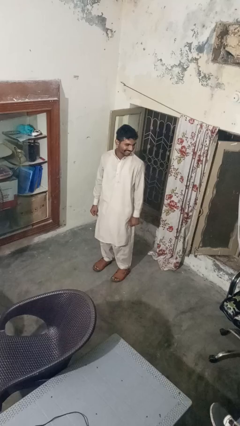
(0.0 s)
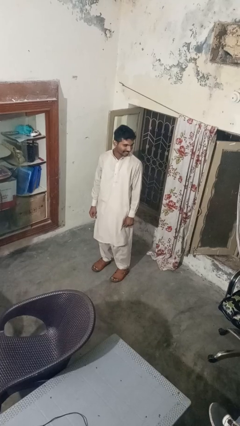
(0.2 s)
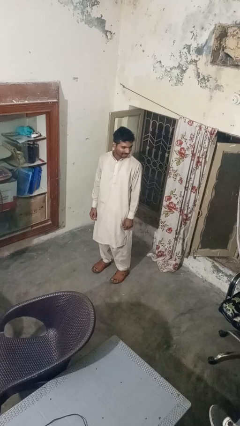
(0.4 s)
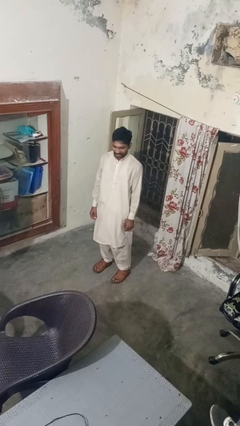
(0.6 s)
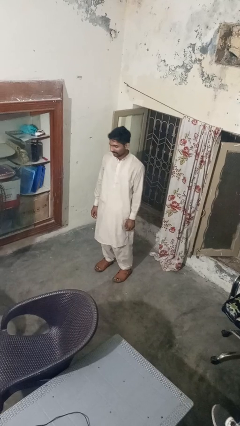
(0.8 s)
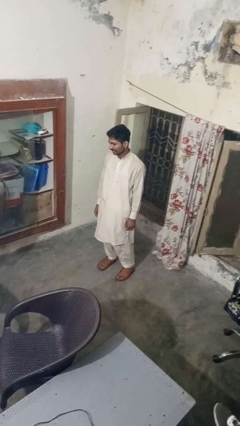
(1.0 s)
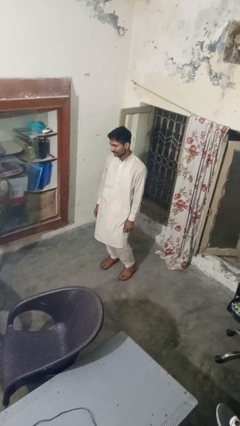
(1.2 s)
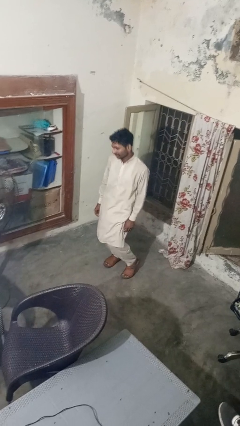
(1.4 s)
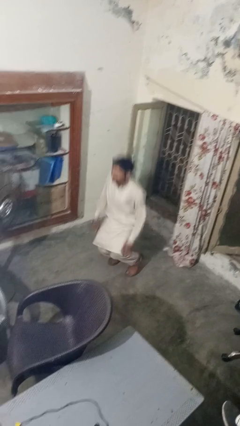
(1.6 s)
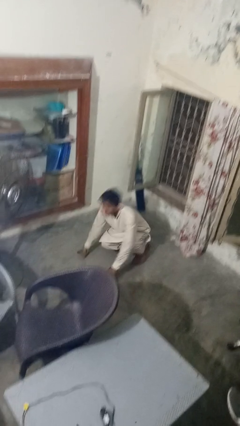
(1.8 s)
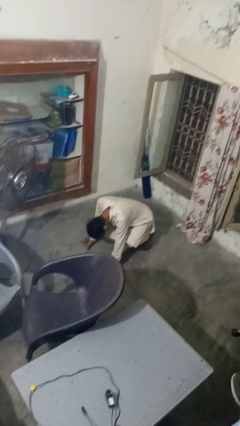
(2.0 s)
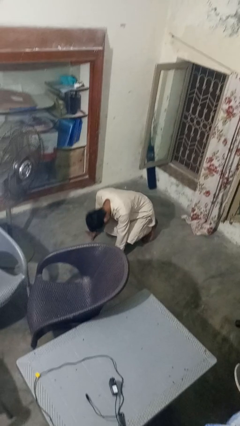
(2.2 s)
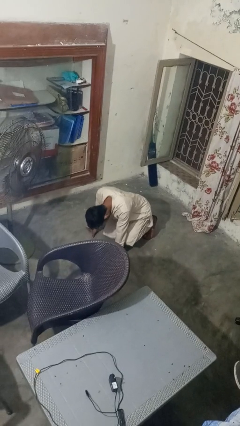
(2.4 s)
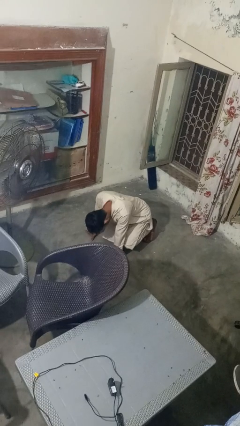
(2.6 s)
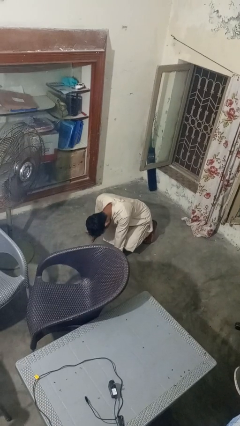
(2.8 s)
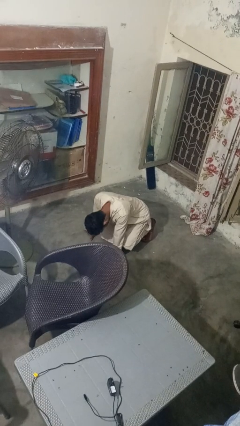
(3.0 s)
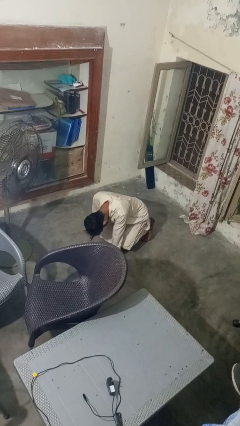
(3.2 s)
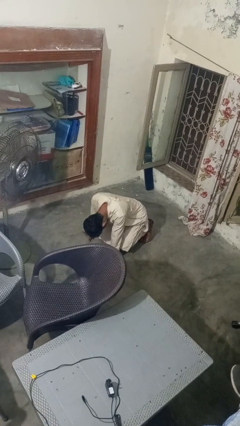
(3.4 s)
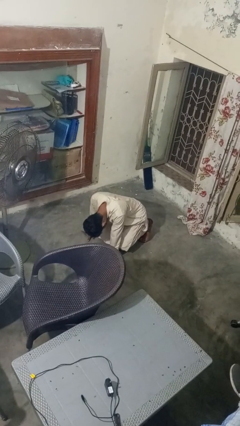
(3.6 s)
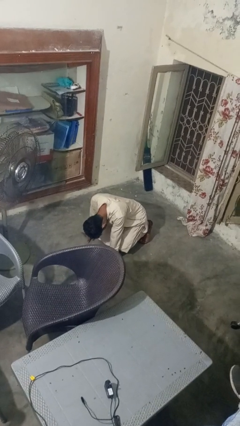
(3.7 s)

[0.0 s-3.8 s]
person falls while standing

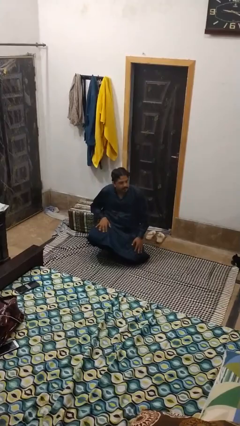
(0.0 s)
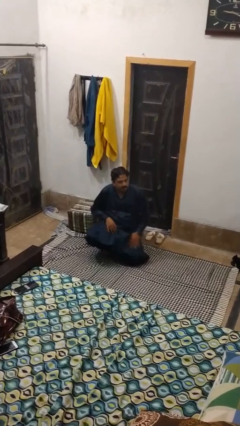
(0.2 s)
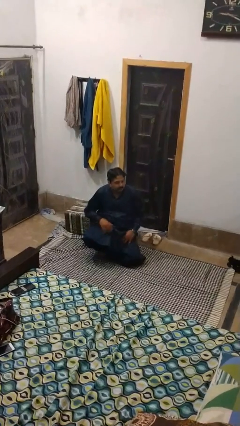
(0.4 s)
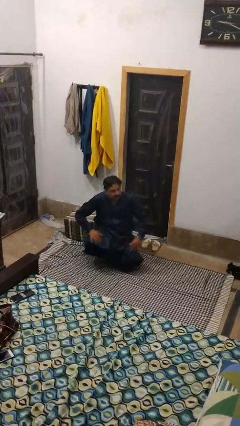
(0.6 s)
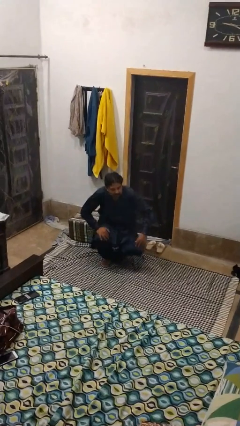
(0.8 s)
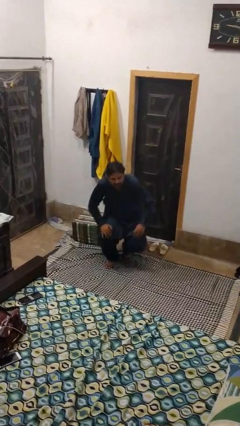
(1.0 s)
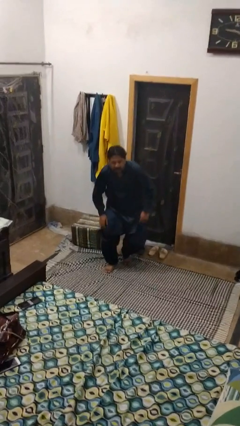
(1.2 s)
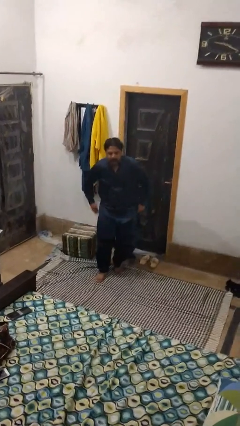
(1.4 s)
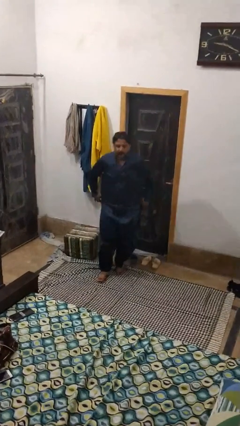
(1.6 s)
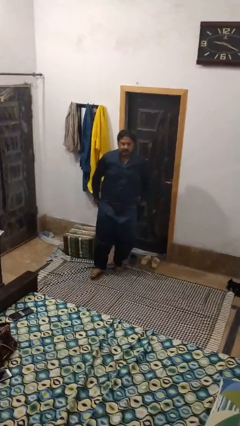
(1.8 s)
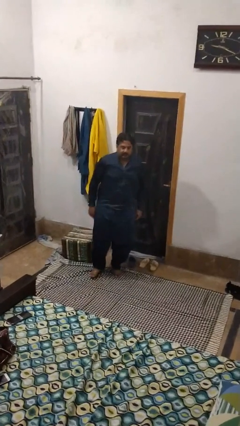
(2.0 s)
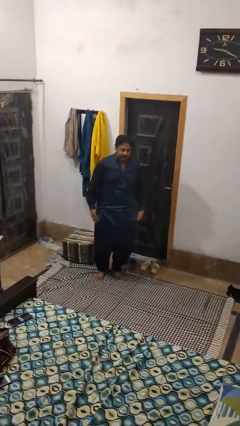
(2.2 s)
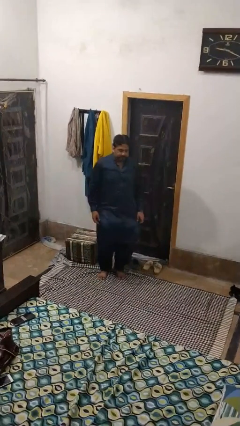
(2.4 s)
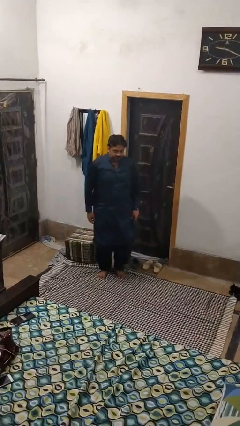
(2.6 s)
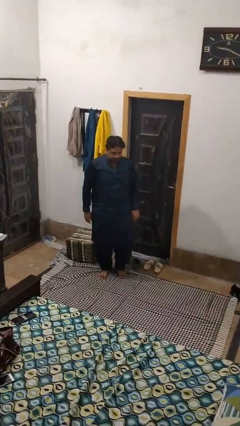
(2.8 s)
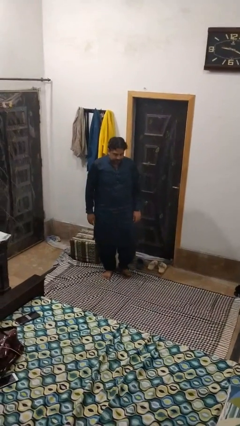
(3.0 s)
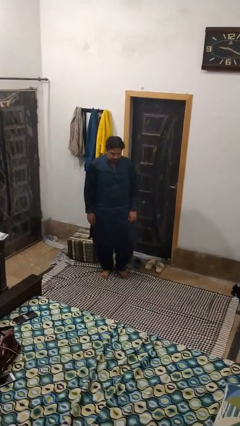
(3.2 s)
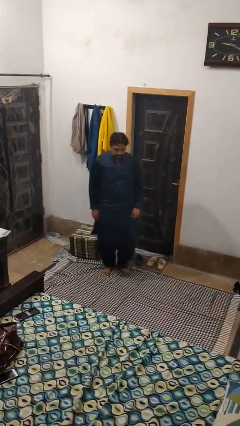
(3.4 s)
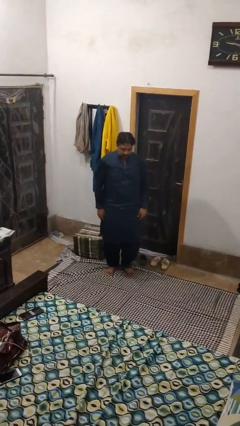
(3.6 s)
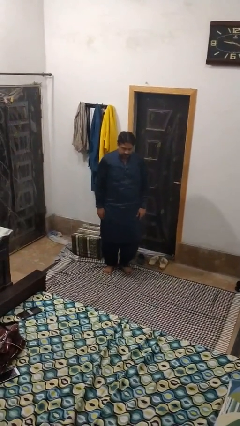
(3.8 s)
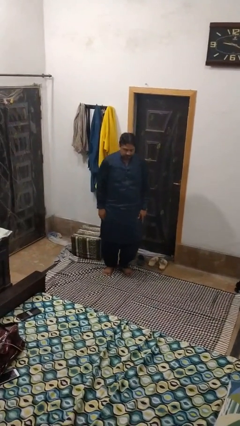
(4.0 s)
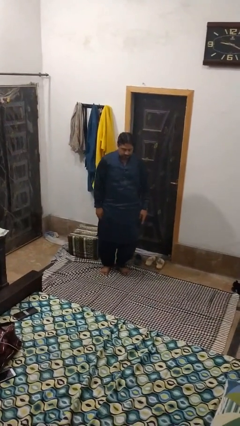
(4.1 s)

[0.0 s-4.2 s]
person stands up from floor

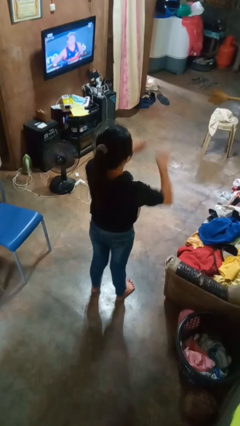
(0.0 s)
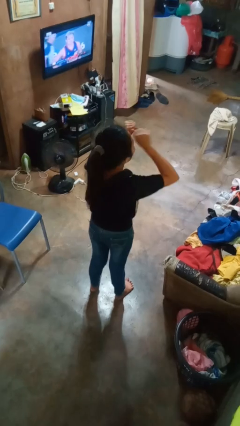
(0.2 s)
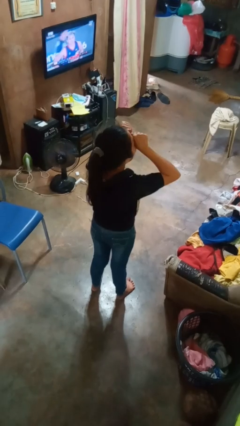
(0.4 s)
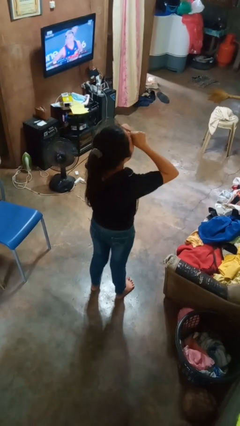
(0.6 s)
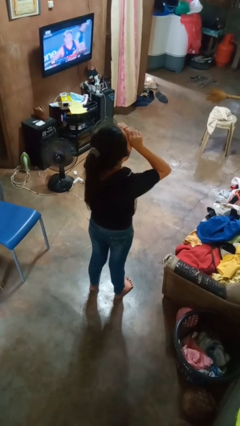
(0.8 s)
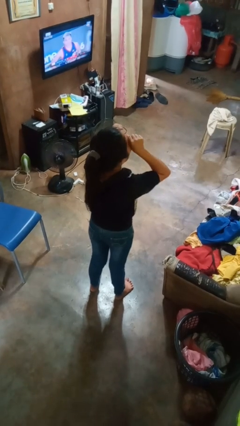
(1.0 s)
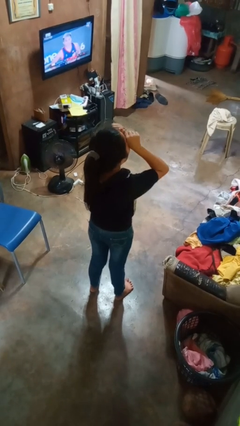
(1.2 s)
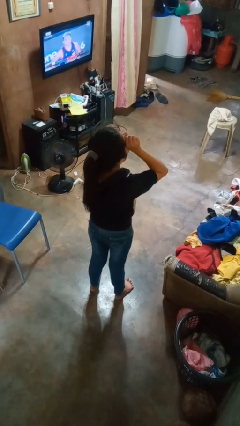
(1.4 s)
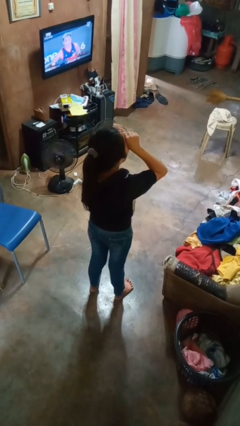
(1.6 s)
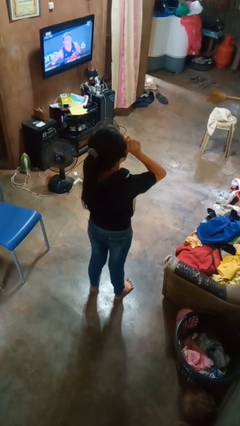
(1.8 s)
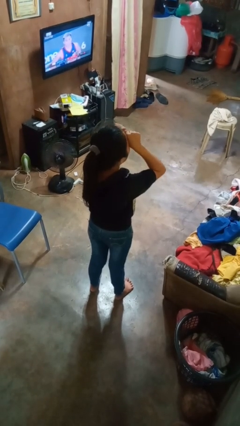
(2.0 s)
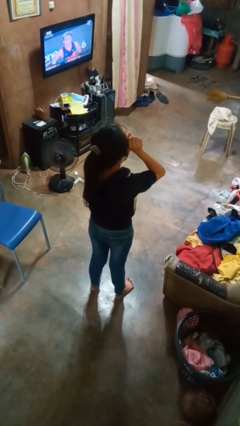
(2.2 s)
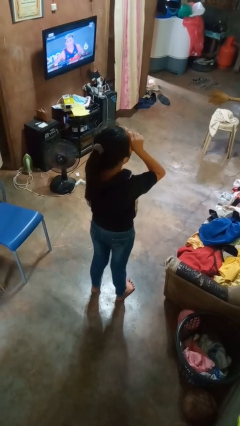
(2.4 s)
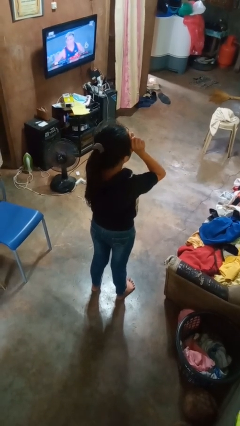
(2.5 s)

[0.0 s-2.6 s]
person rubs eyes

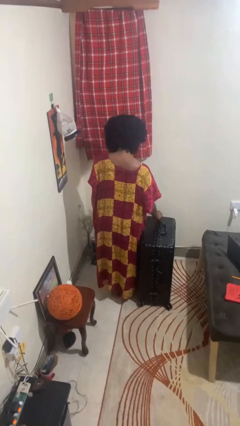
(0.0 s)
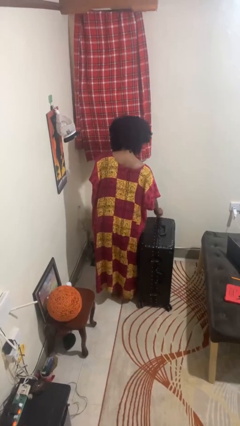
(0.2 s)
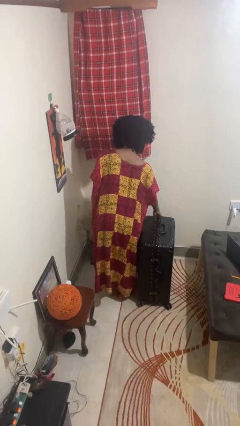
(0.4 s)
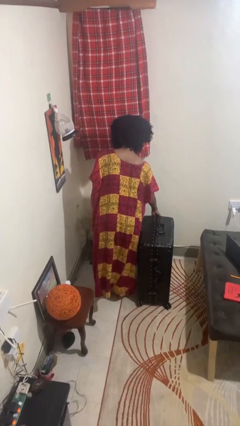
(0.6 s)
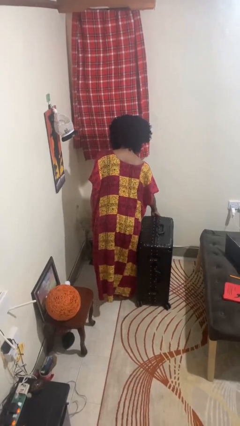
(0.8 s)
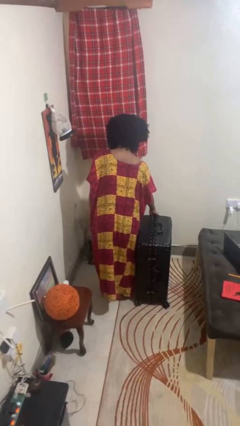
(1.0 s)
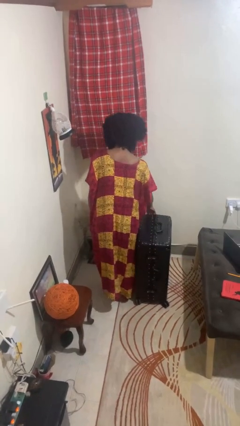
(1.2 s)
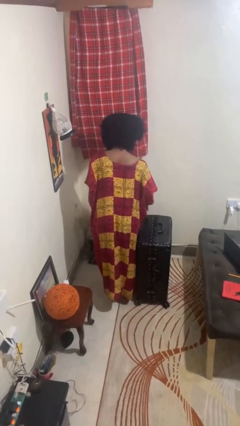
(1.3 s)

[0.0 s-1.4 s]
person closes suitcase

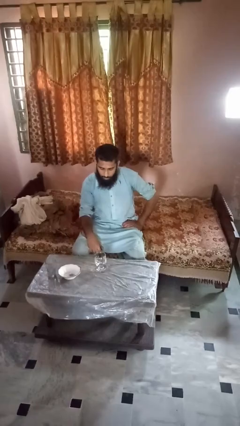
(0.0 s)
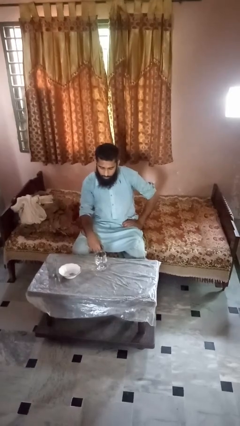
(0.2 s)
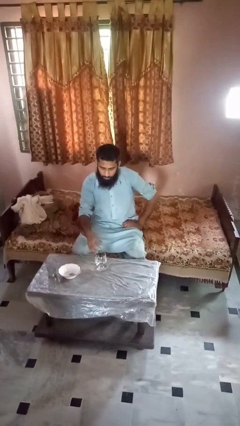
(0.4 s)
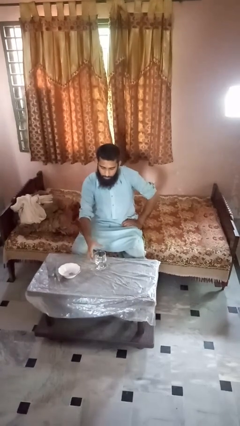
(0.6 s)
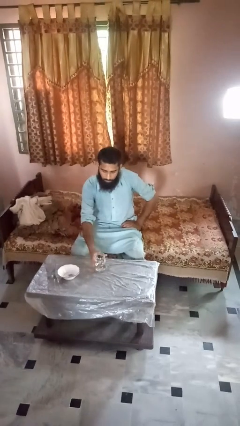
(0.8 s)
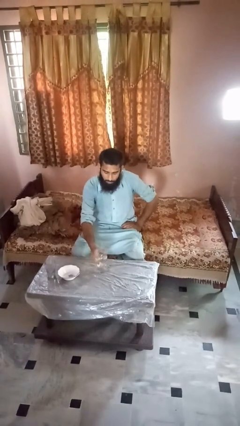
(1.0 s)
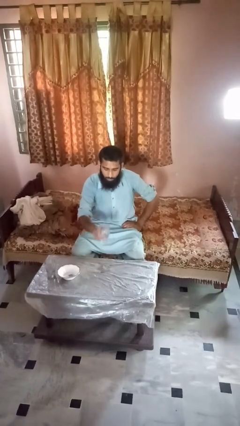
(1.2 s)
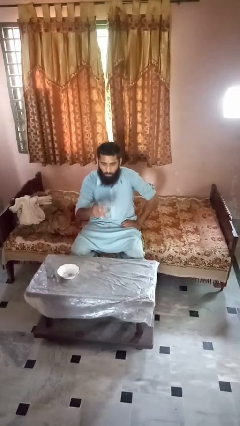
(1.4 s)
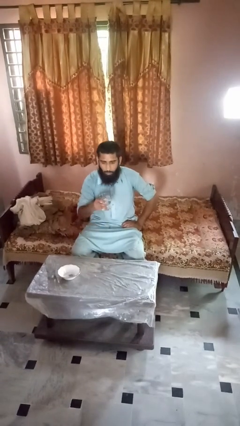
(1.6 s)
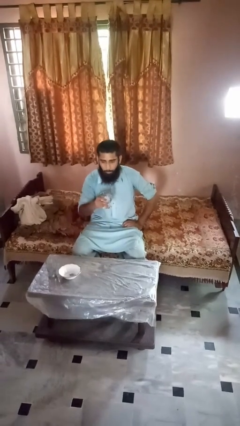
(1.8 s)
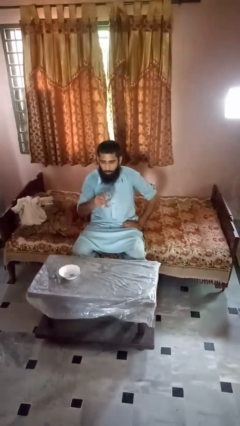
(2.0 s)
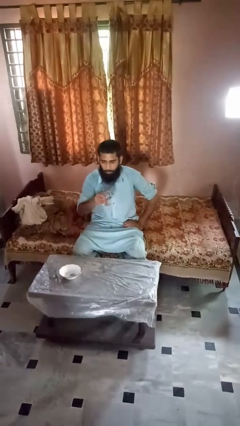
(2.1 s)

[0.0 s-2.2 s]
person picks up object from table

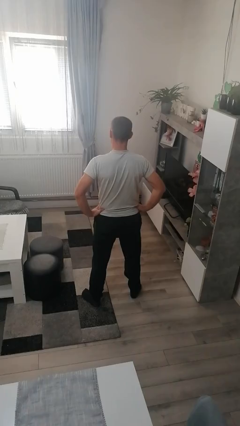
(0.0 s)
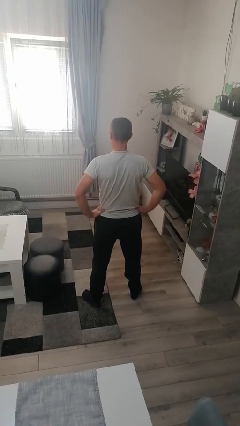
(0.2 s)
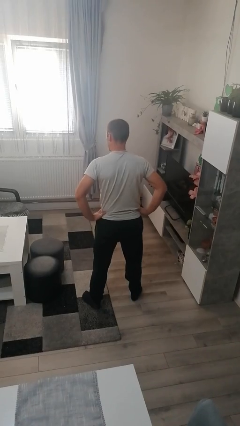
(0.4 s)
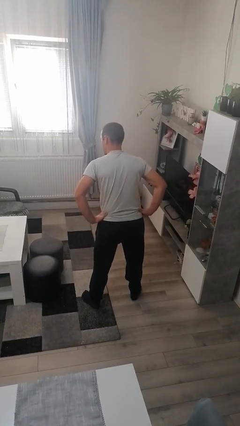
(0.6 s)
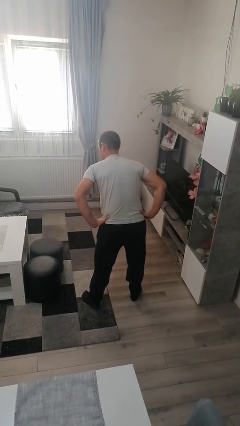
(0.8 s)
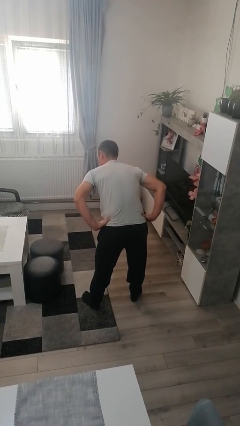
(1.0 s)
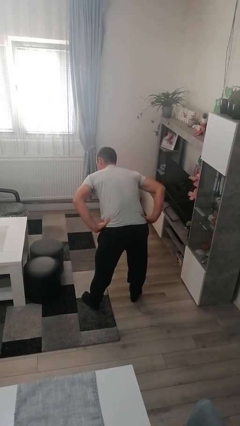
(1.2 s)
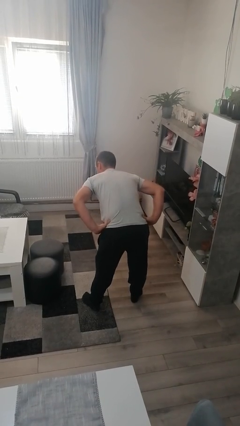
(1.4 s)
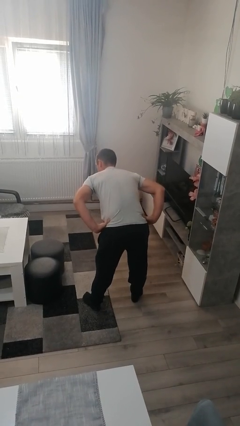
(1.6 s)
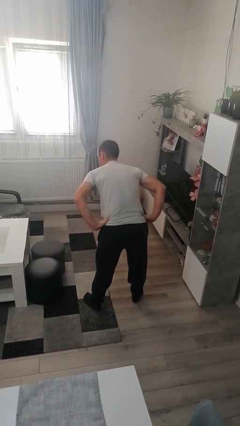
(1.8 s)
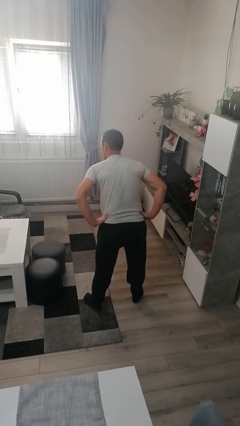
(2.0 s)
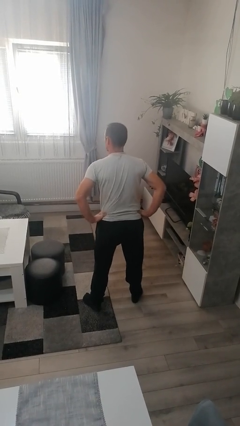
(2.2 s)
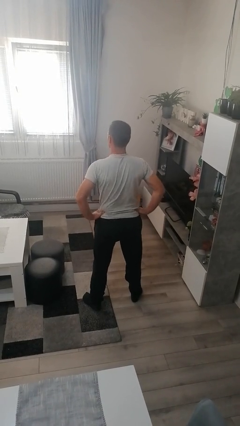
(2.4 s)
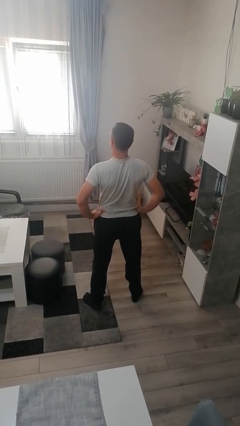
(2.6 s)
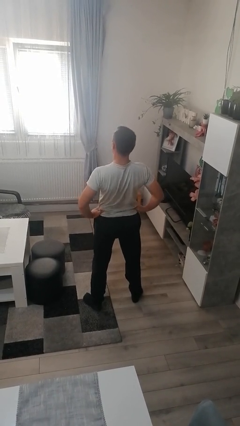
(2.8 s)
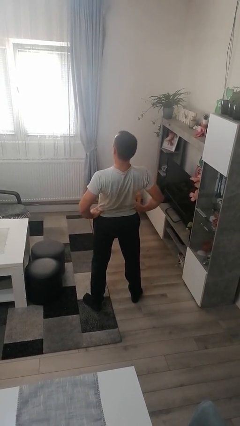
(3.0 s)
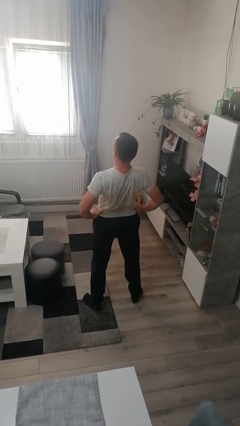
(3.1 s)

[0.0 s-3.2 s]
person wiggles hips
